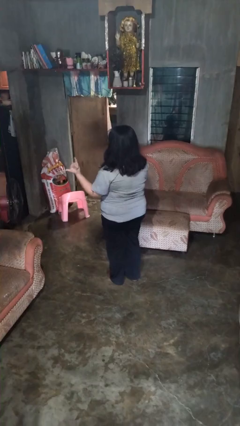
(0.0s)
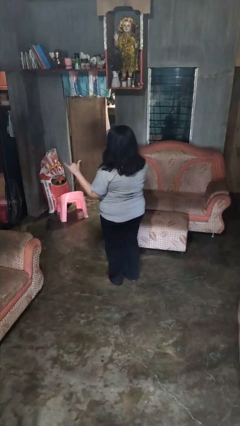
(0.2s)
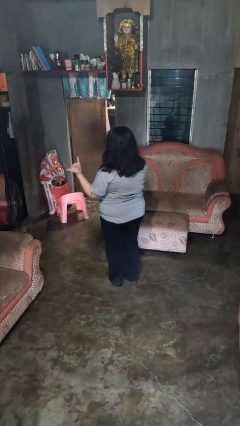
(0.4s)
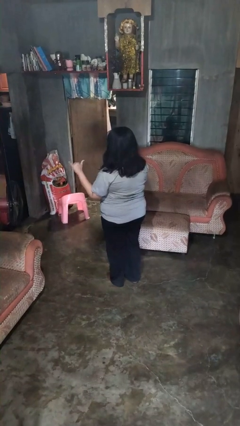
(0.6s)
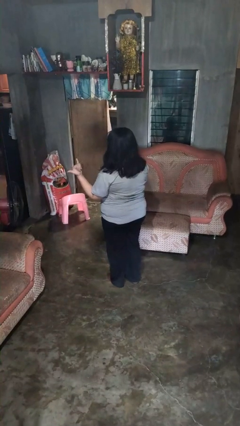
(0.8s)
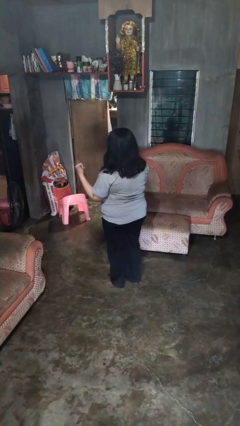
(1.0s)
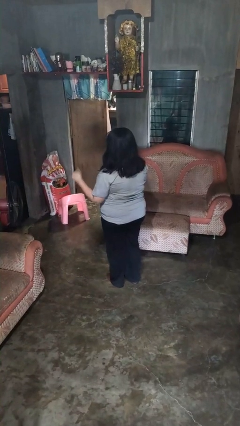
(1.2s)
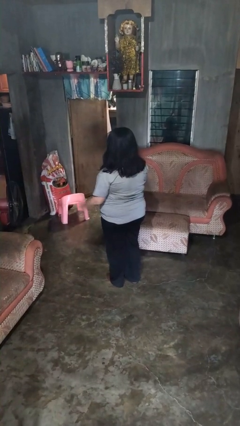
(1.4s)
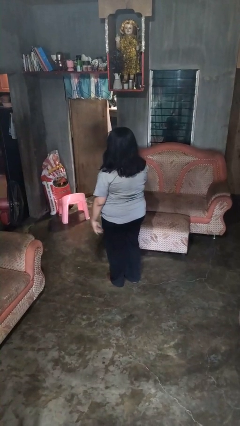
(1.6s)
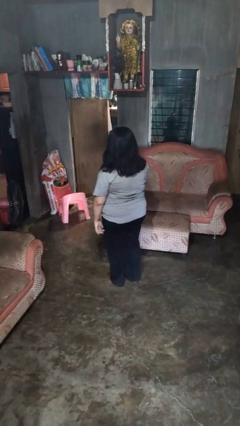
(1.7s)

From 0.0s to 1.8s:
person gestures hang loose

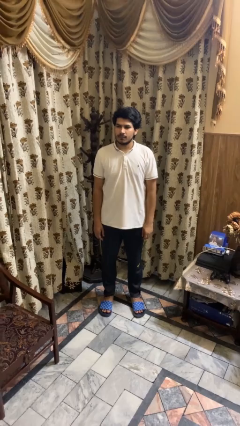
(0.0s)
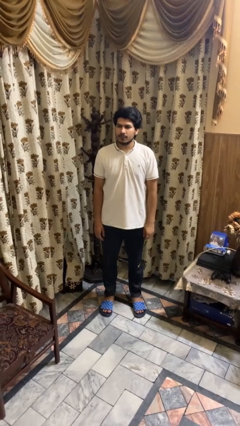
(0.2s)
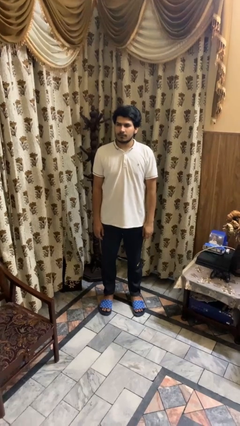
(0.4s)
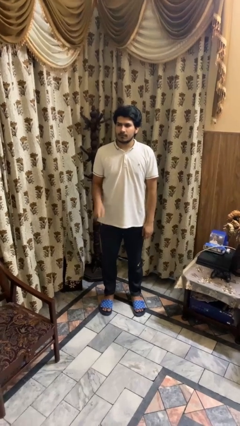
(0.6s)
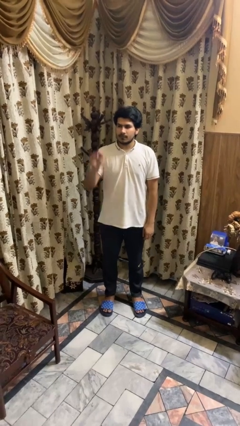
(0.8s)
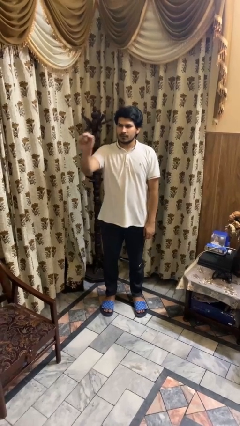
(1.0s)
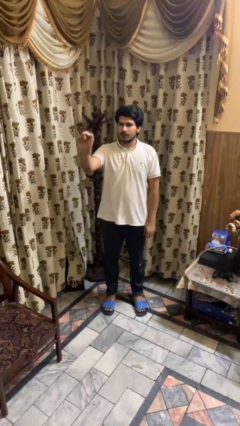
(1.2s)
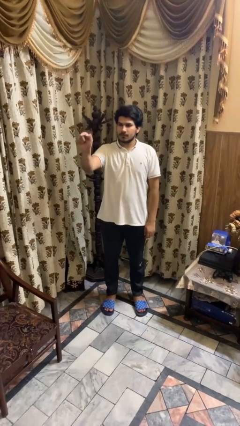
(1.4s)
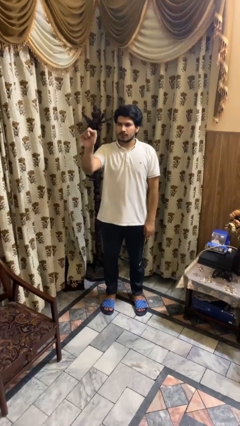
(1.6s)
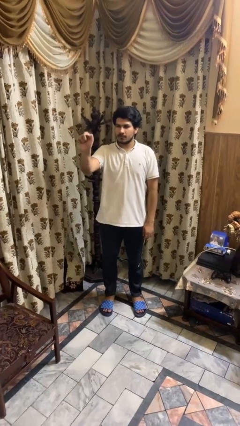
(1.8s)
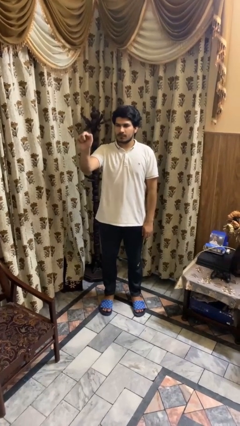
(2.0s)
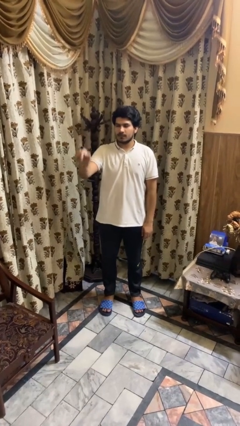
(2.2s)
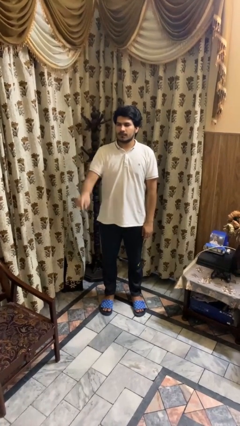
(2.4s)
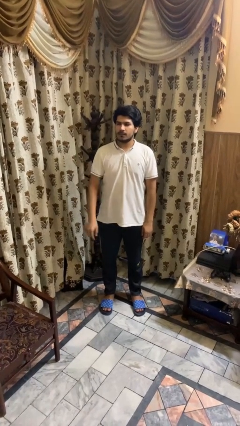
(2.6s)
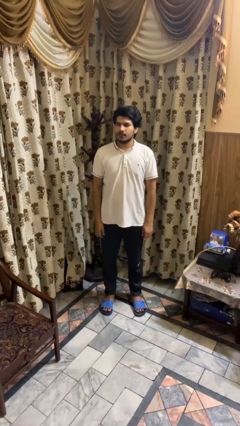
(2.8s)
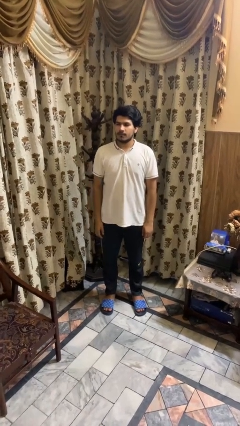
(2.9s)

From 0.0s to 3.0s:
person points at person

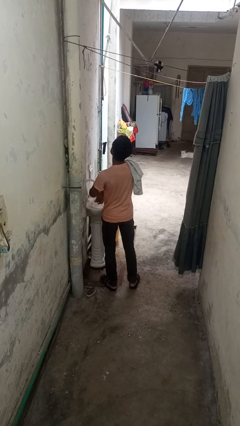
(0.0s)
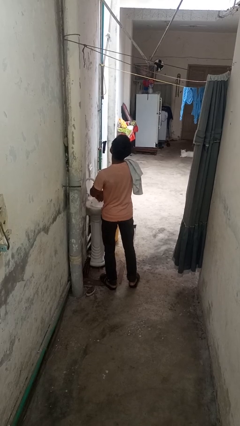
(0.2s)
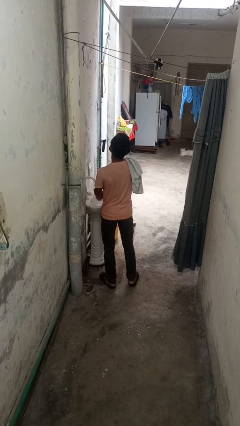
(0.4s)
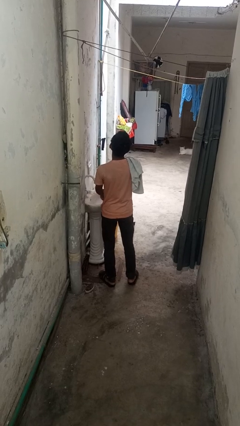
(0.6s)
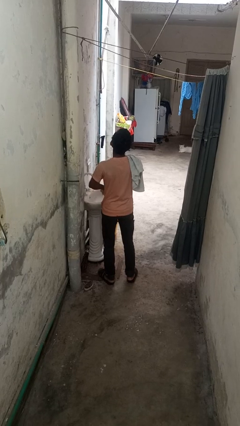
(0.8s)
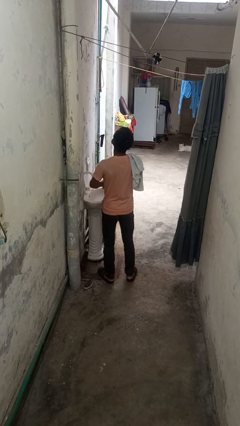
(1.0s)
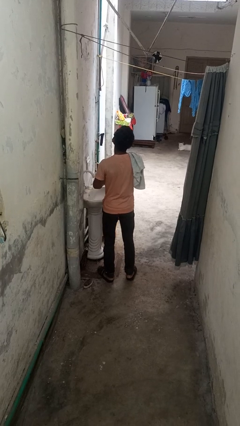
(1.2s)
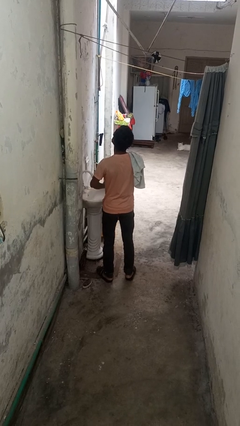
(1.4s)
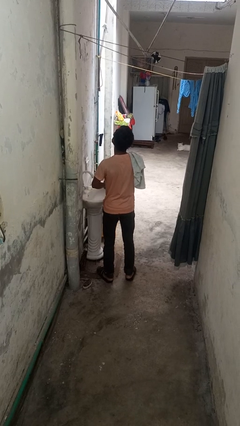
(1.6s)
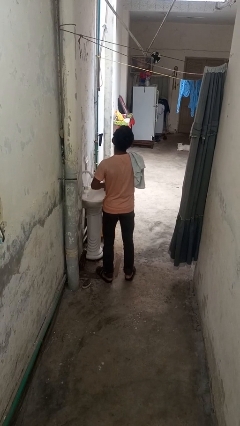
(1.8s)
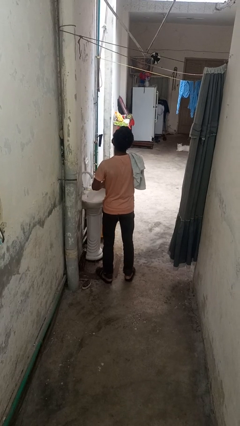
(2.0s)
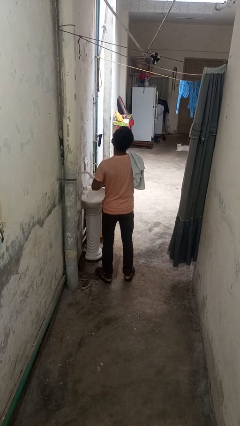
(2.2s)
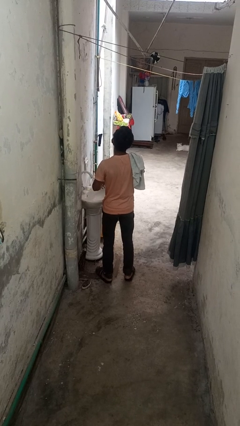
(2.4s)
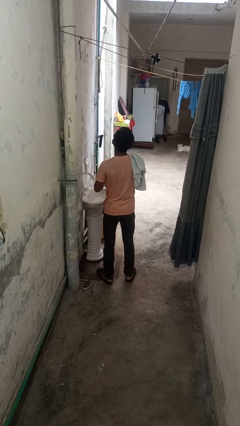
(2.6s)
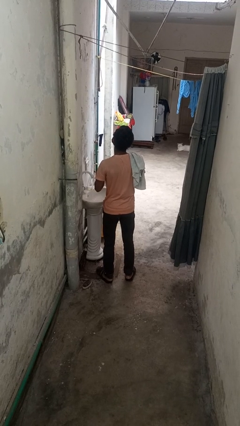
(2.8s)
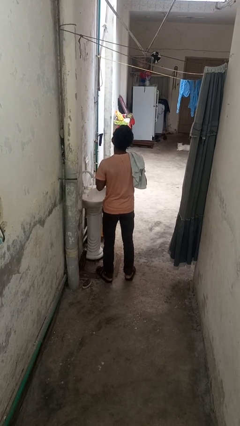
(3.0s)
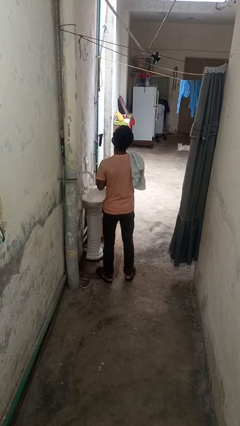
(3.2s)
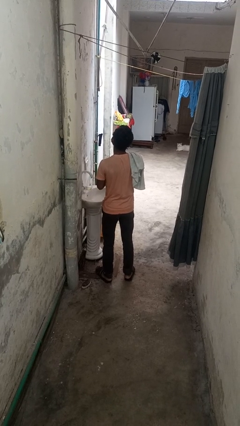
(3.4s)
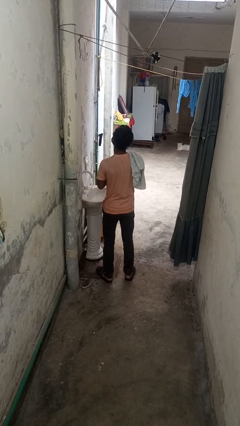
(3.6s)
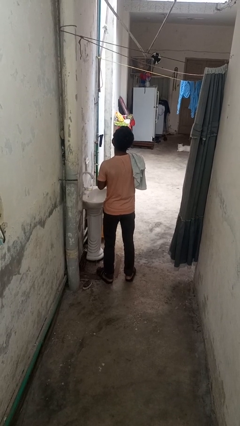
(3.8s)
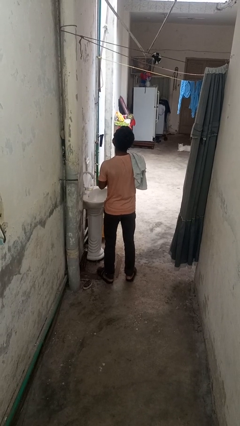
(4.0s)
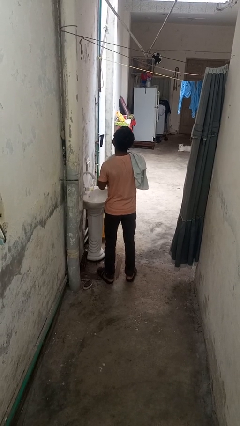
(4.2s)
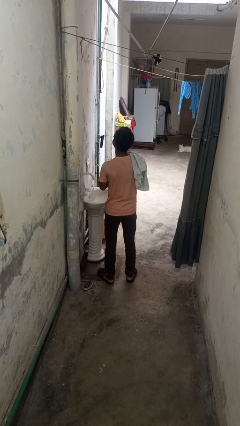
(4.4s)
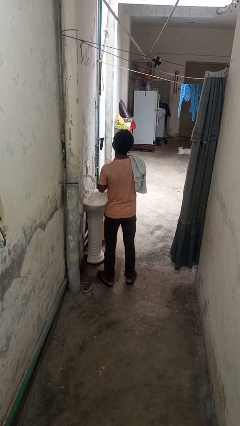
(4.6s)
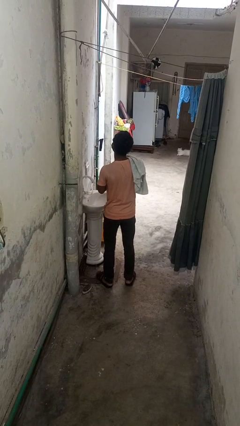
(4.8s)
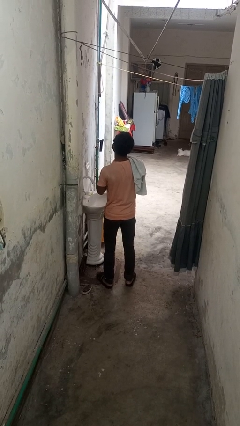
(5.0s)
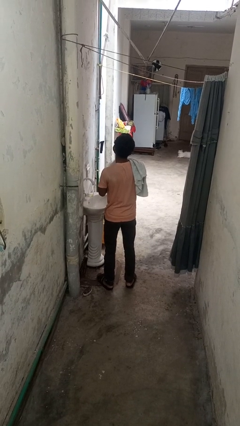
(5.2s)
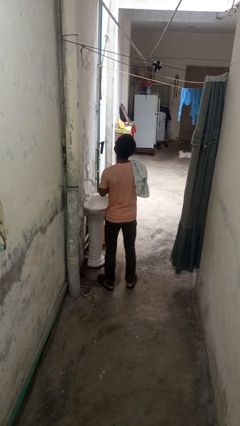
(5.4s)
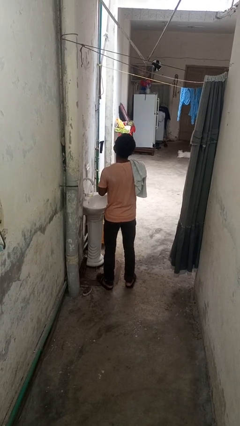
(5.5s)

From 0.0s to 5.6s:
person dries hands with towel

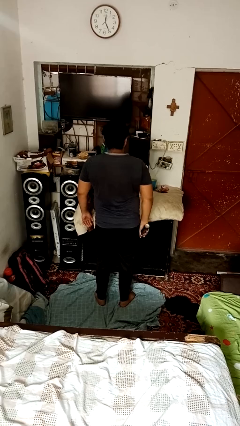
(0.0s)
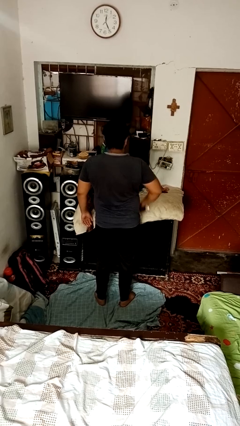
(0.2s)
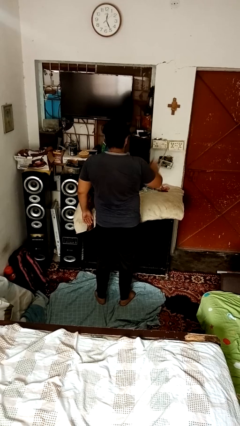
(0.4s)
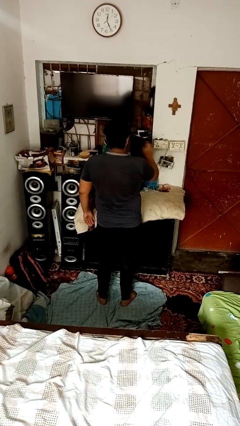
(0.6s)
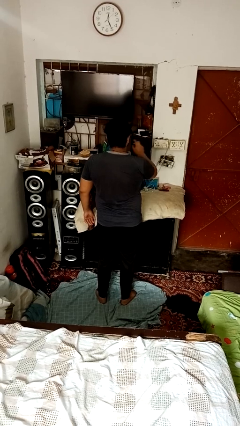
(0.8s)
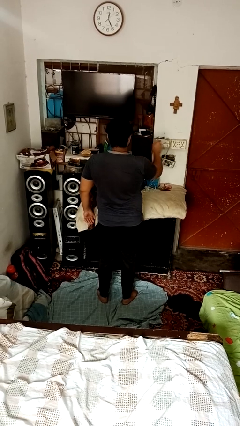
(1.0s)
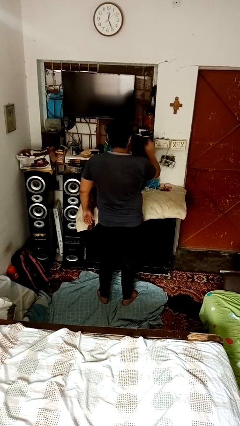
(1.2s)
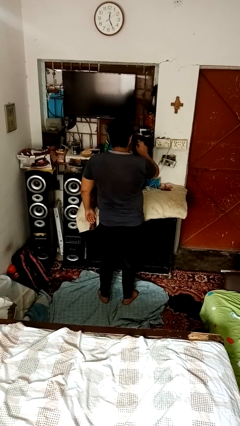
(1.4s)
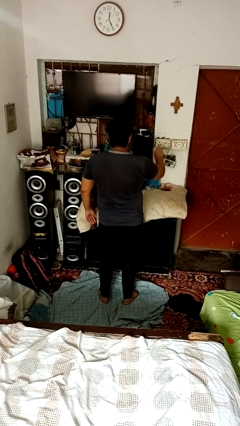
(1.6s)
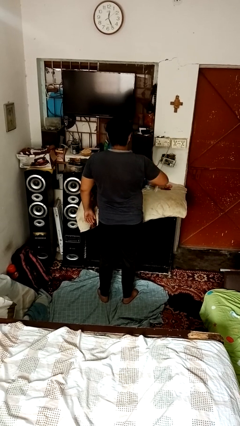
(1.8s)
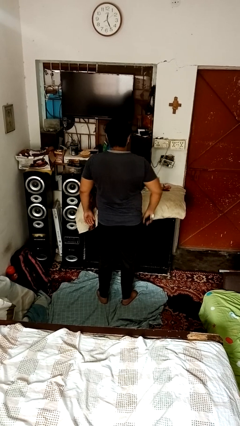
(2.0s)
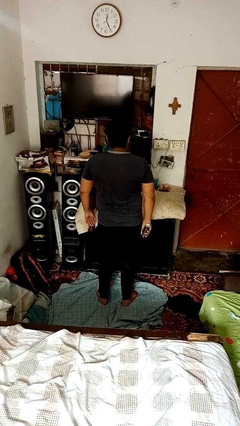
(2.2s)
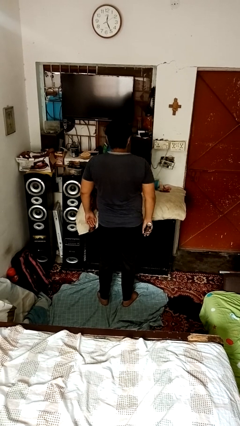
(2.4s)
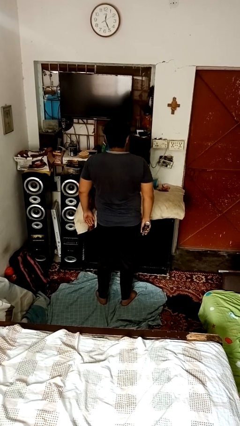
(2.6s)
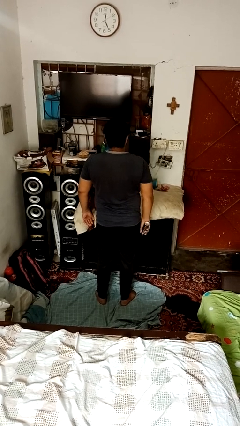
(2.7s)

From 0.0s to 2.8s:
person sprays from bottle

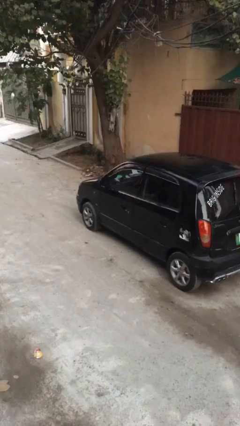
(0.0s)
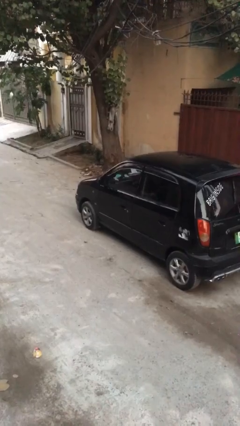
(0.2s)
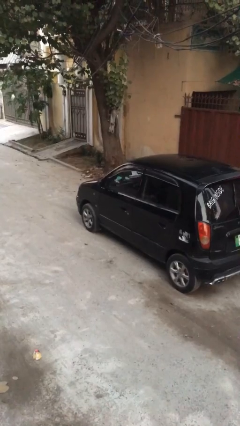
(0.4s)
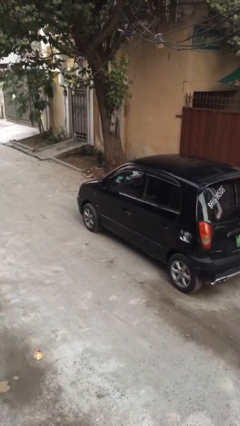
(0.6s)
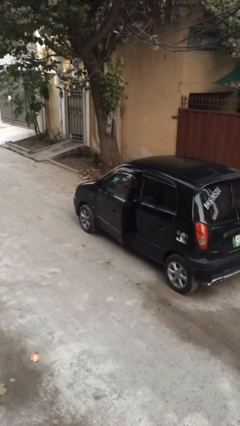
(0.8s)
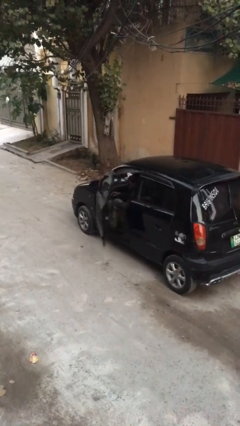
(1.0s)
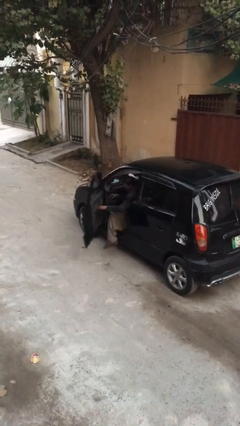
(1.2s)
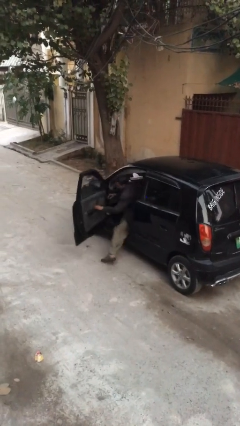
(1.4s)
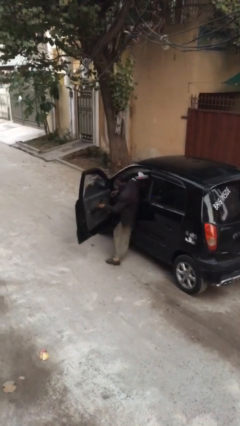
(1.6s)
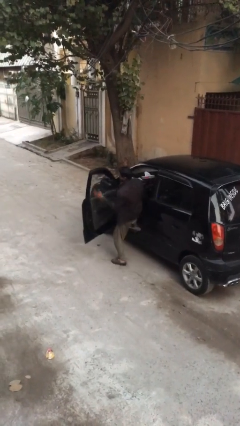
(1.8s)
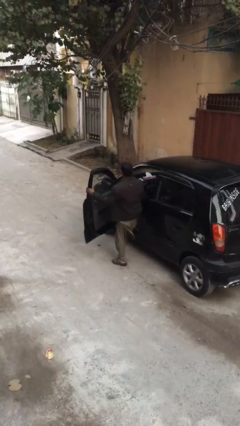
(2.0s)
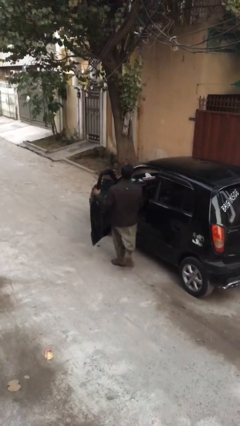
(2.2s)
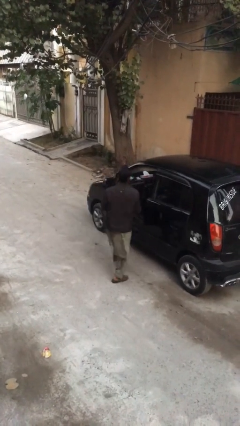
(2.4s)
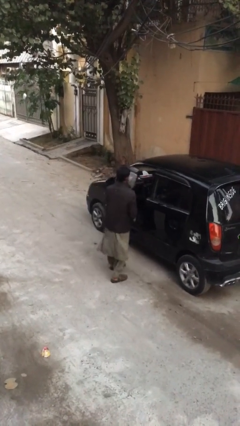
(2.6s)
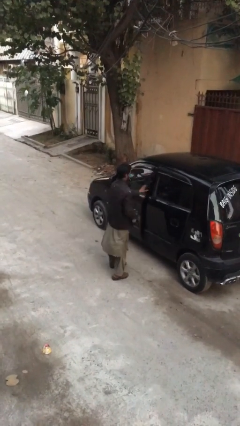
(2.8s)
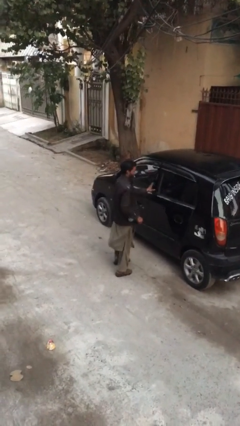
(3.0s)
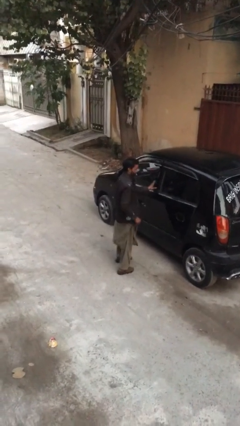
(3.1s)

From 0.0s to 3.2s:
car drops off person

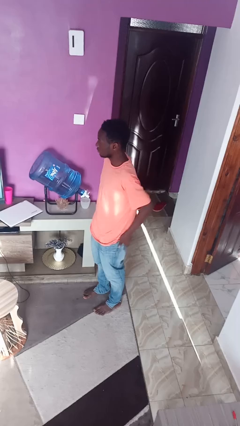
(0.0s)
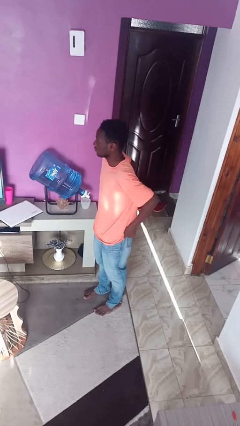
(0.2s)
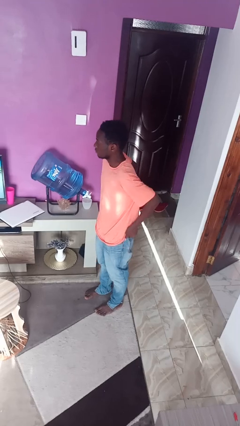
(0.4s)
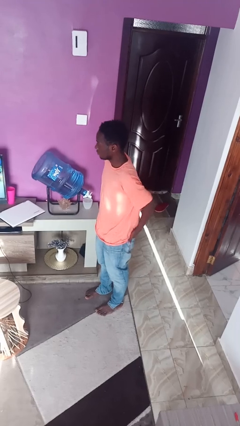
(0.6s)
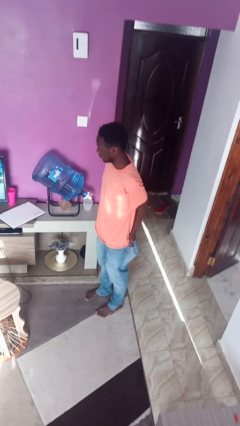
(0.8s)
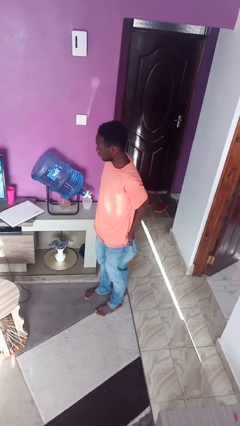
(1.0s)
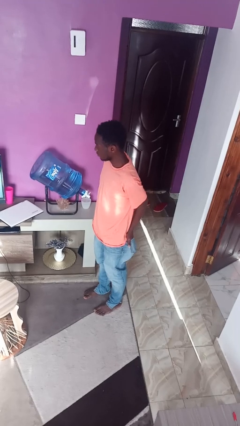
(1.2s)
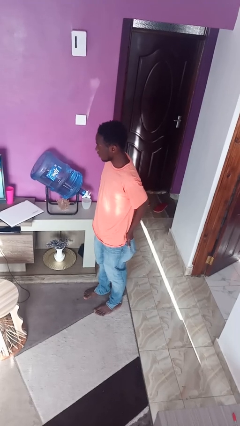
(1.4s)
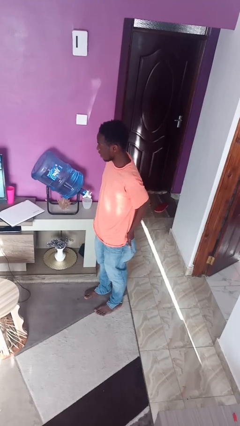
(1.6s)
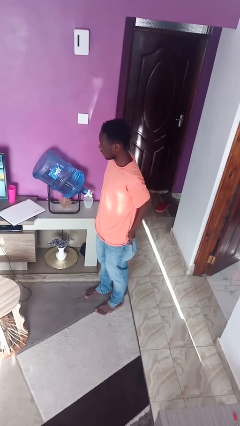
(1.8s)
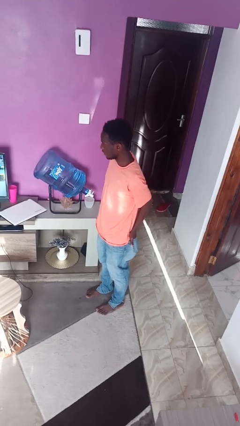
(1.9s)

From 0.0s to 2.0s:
person puts hands in back pockets
